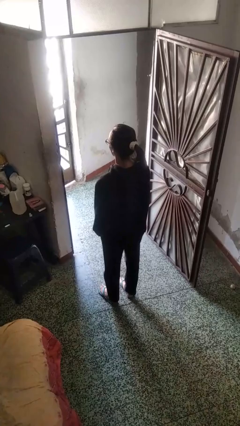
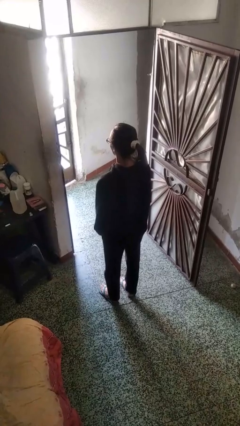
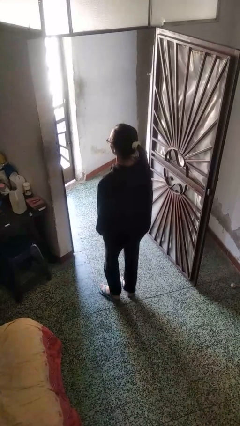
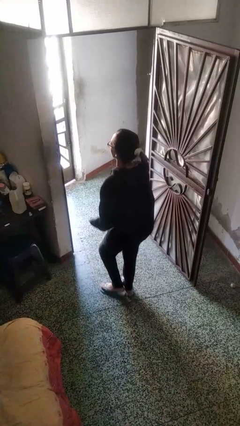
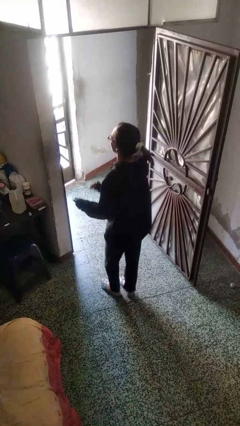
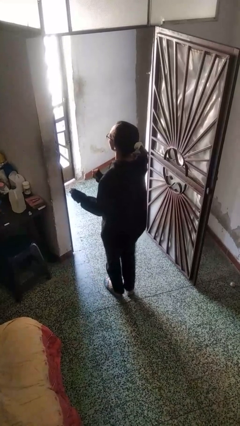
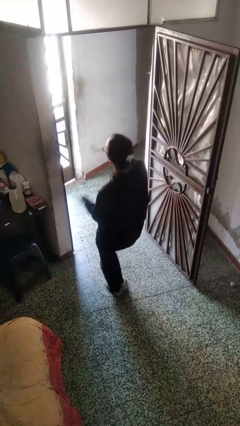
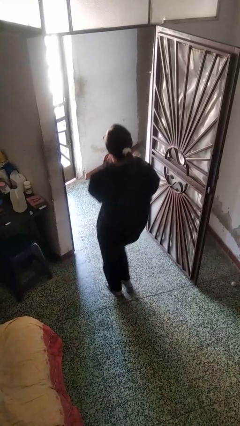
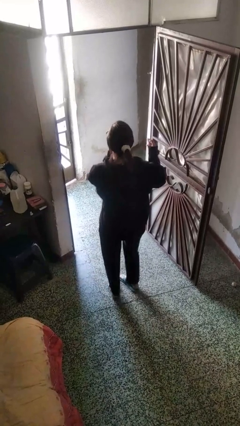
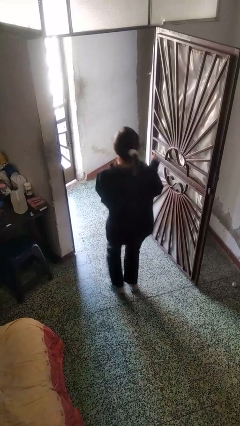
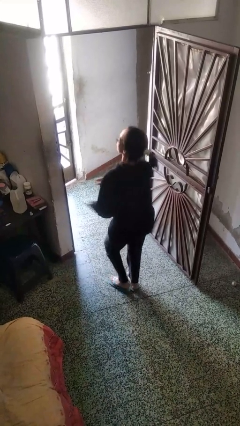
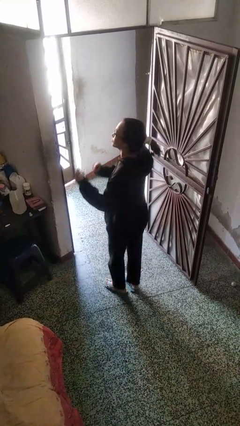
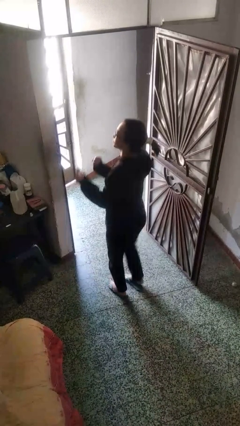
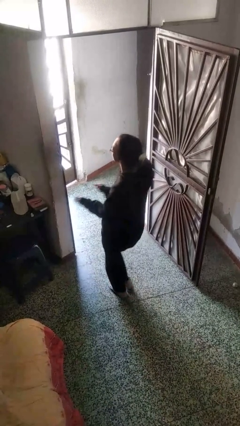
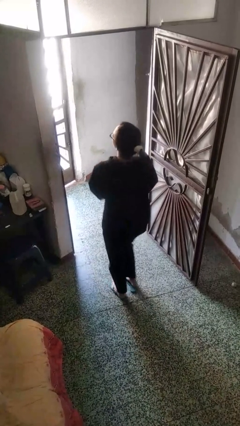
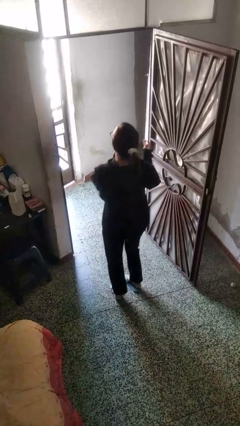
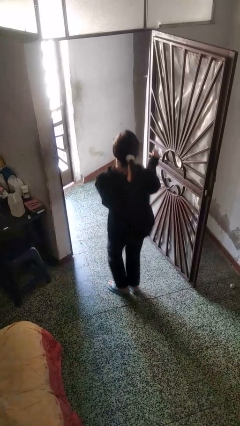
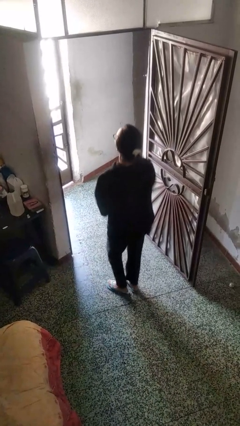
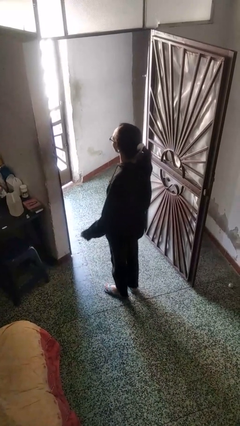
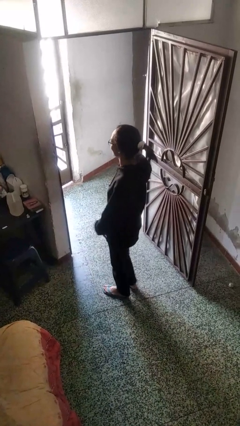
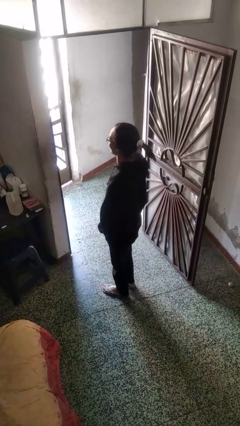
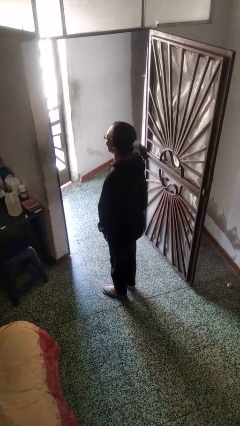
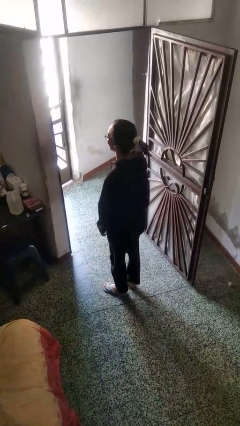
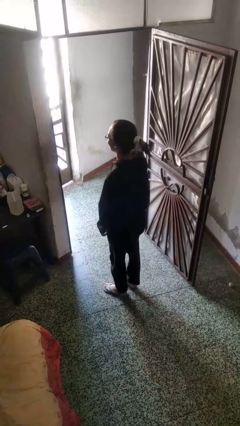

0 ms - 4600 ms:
person dances in place

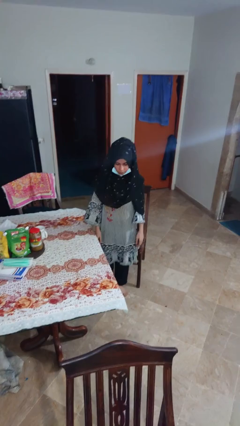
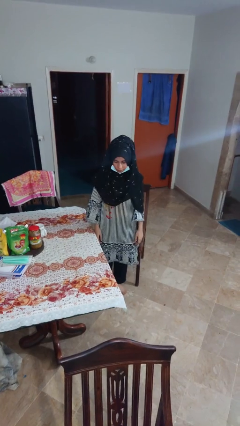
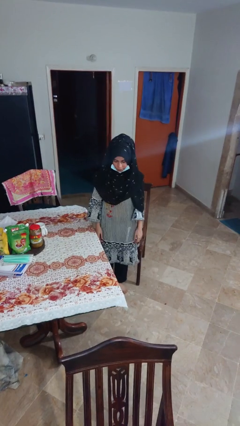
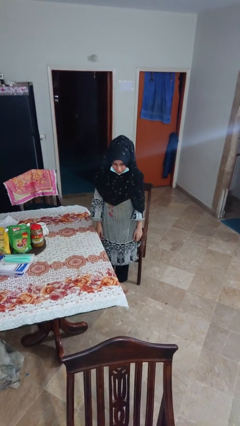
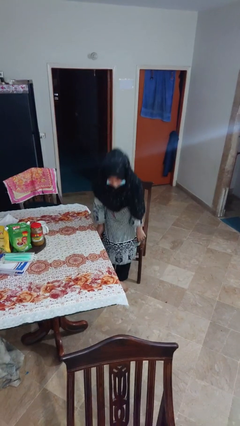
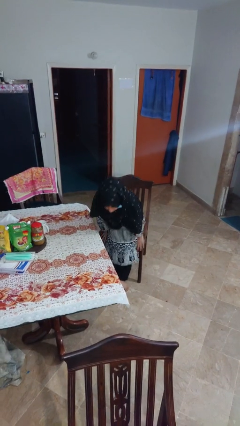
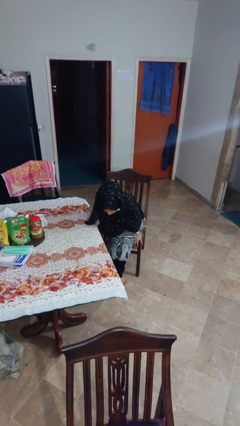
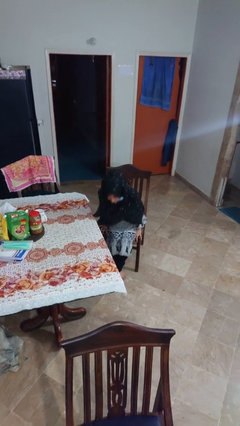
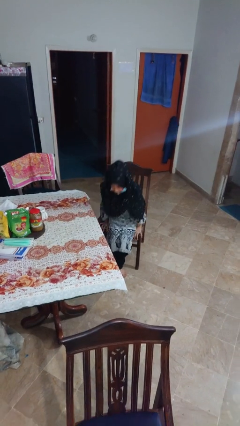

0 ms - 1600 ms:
person sits down

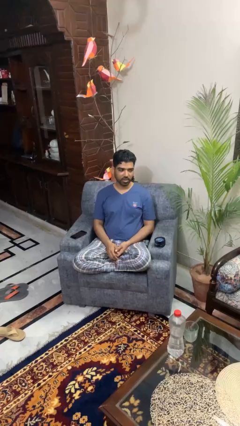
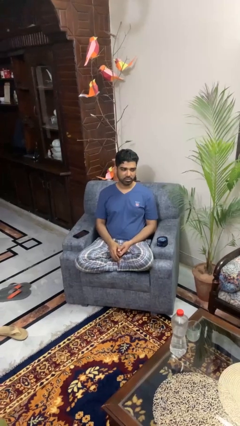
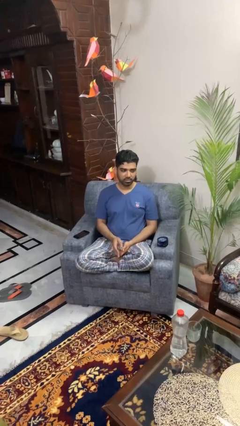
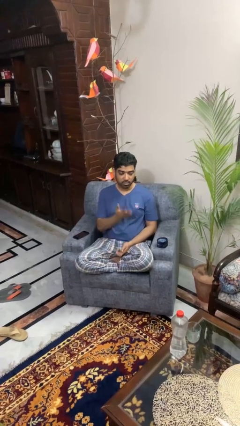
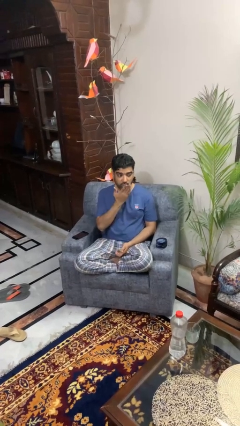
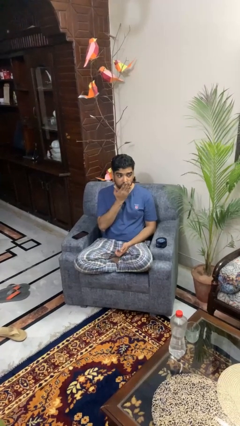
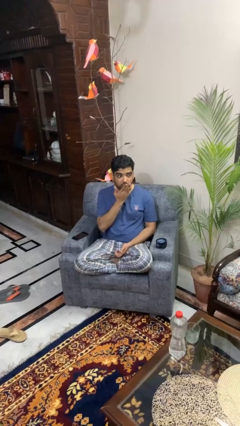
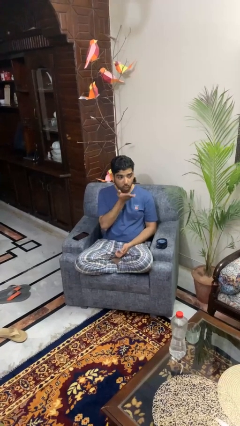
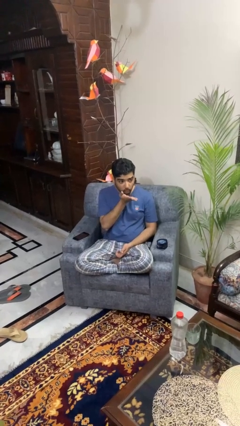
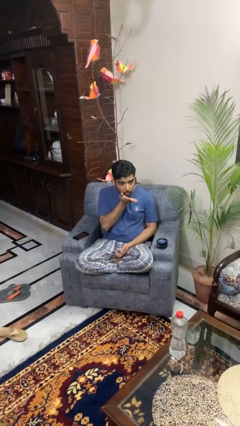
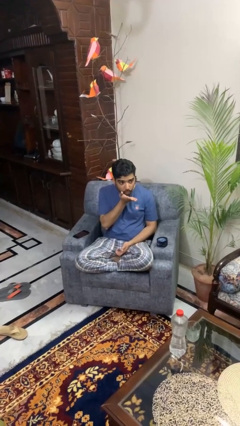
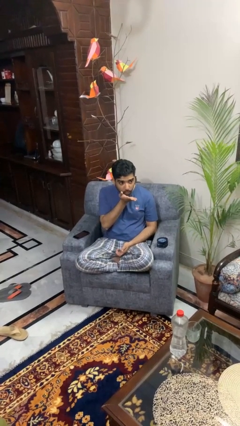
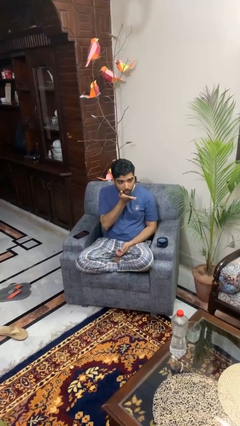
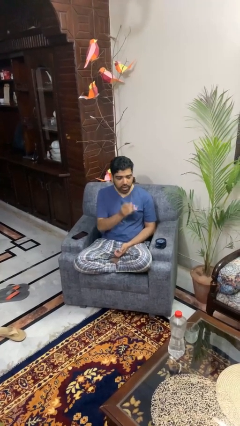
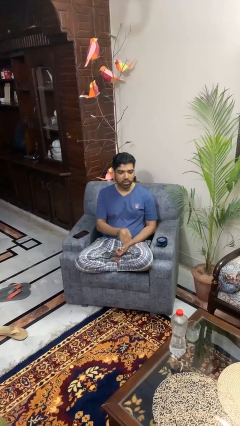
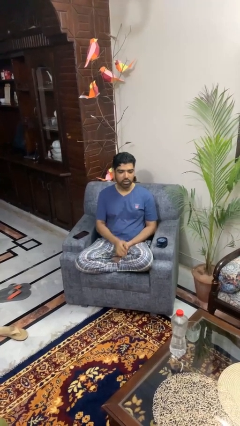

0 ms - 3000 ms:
person gestures blow kiss

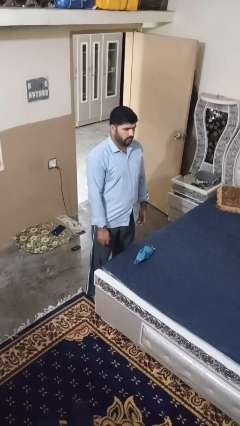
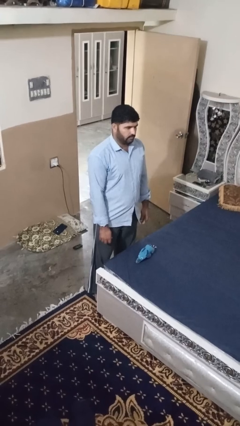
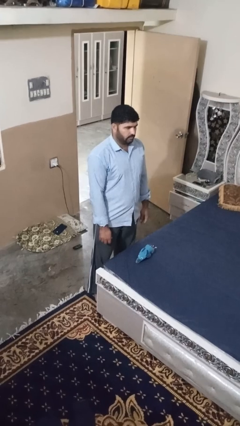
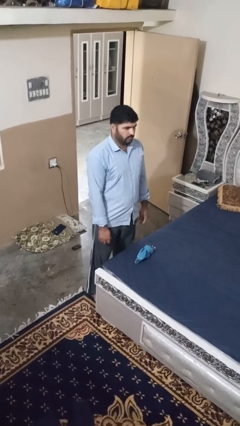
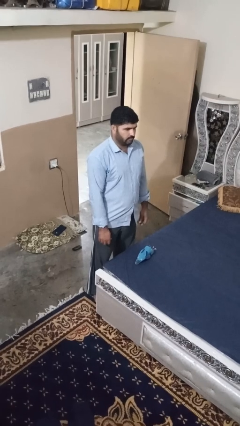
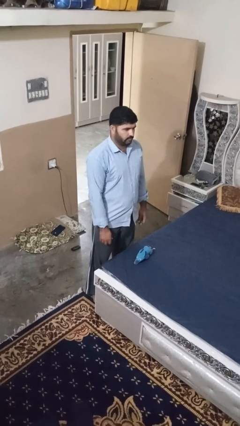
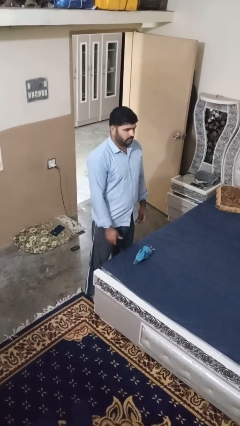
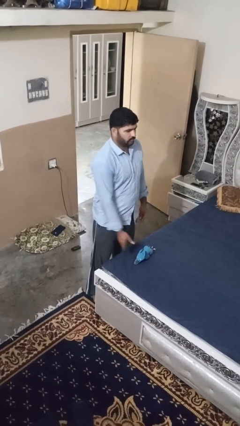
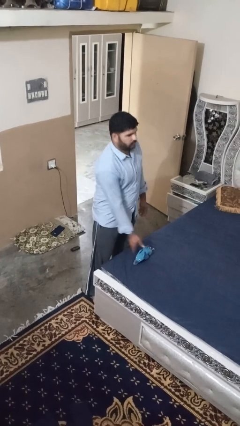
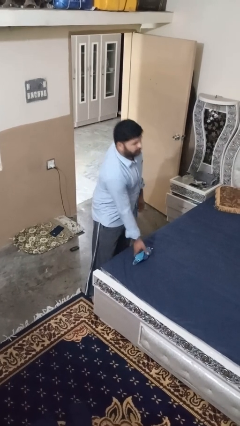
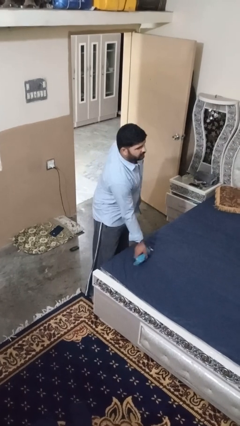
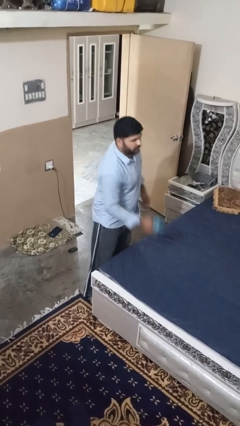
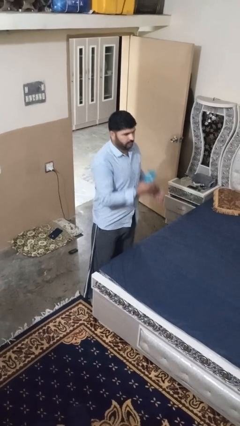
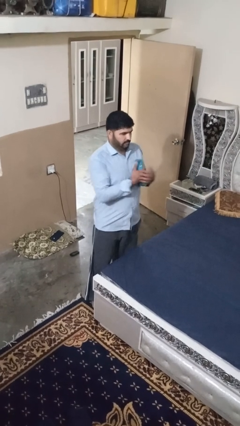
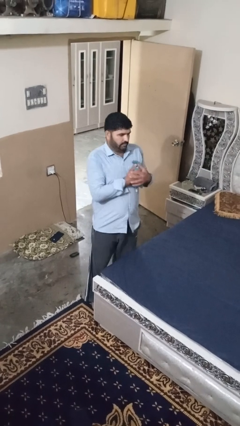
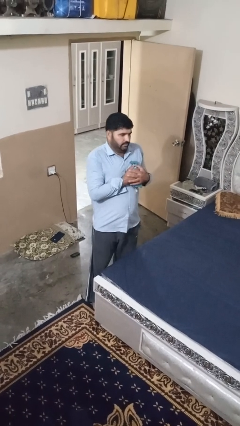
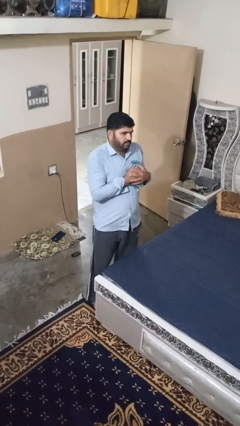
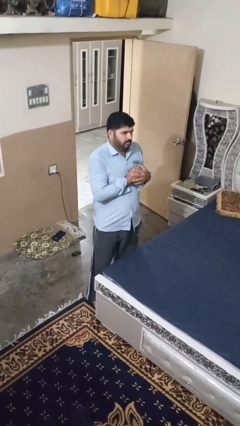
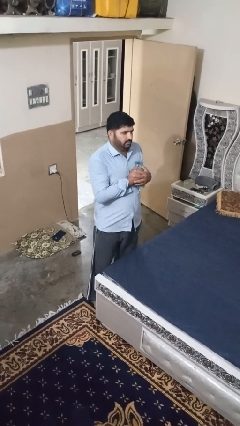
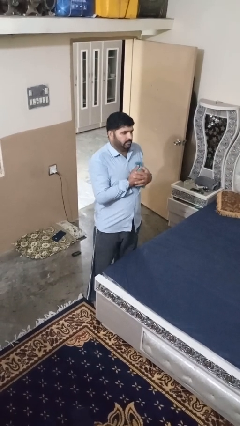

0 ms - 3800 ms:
person hugs stuffed animal

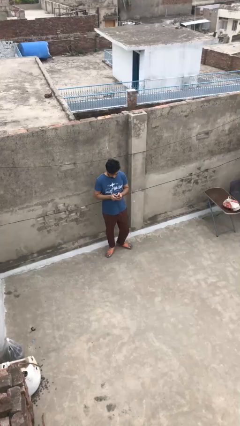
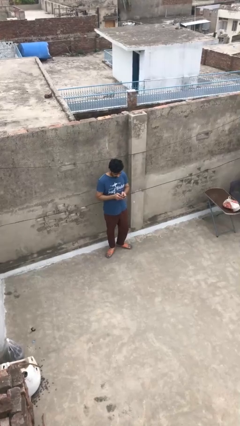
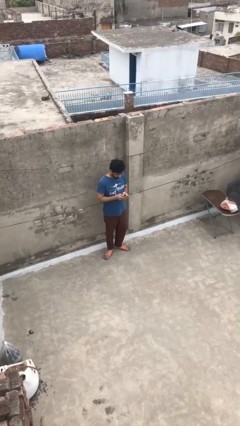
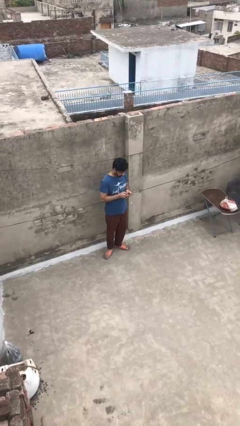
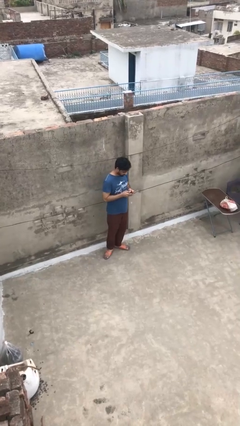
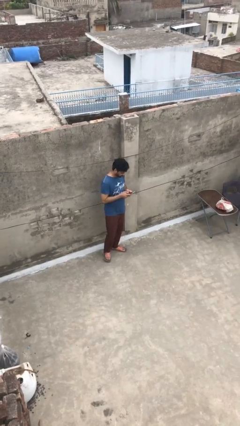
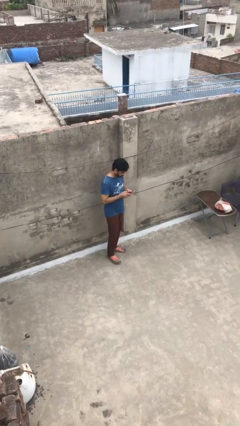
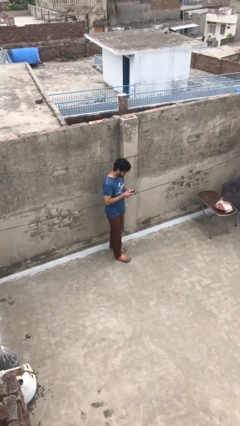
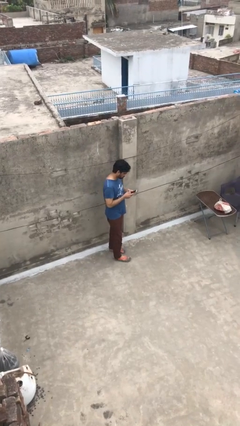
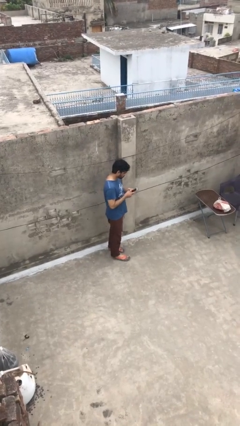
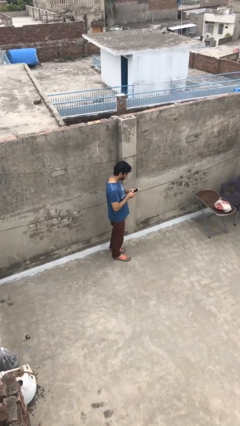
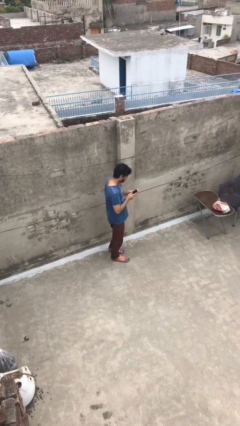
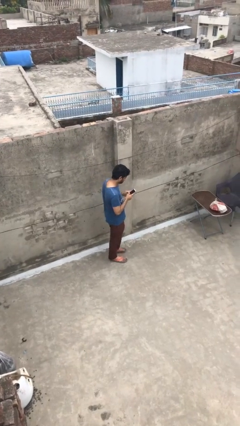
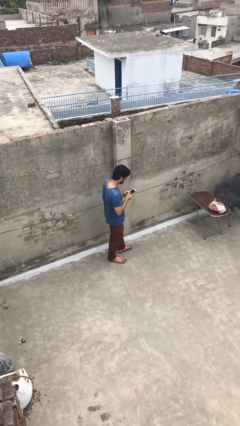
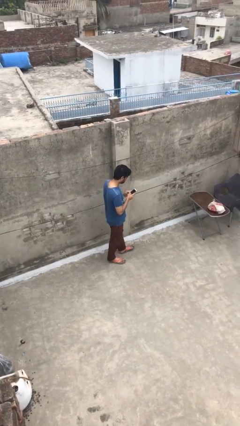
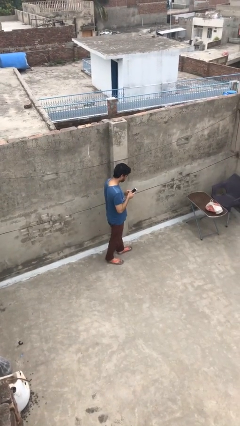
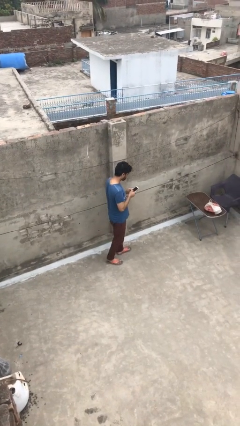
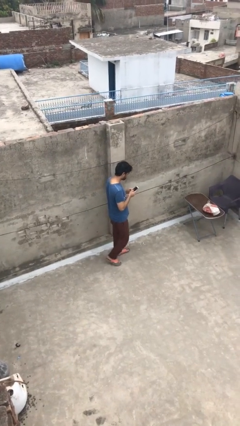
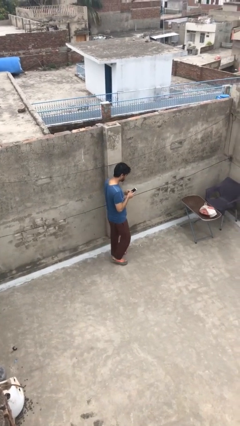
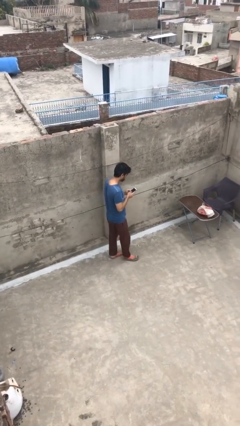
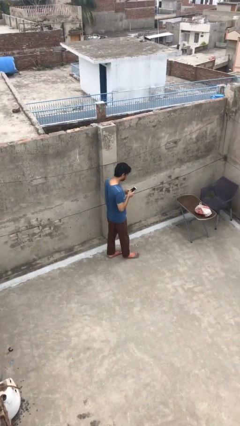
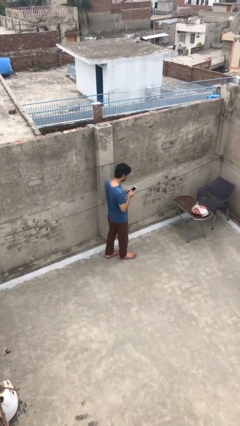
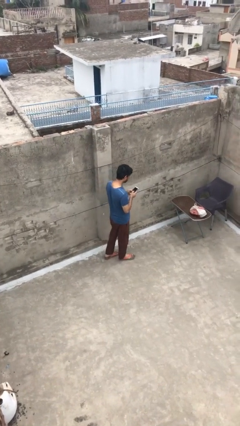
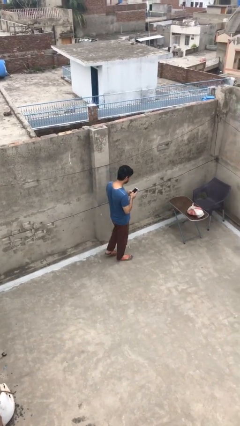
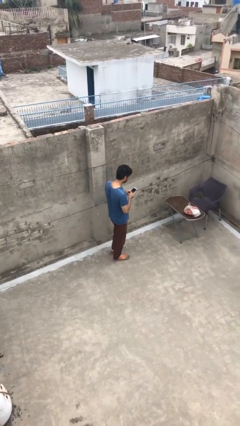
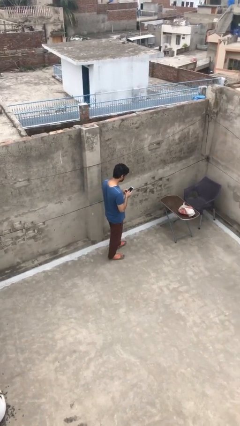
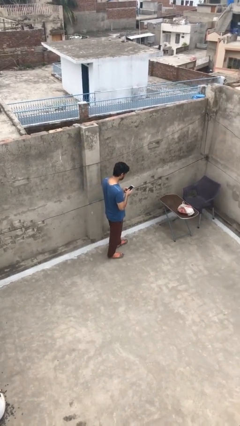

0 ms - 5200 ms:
person texts on phone
